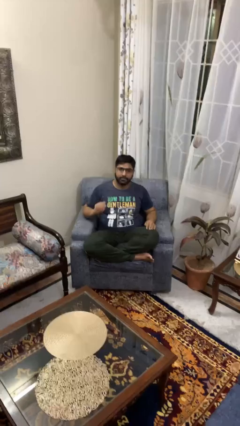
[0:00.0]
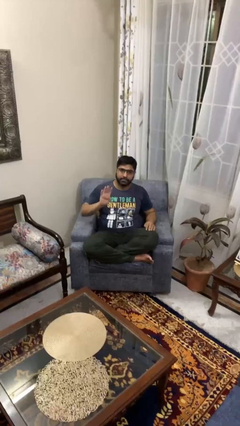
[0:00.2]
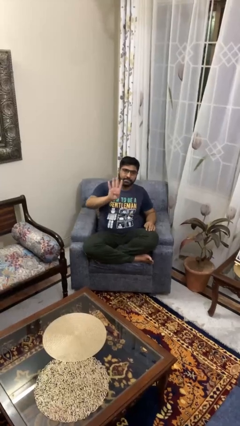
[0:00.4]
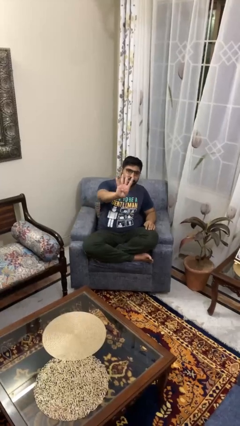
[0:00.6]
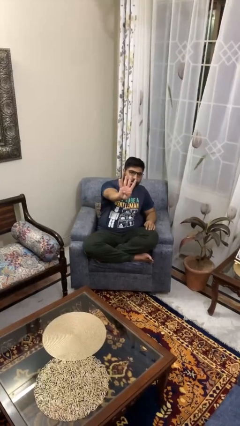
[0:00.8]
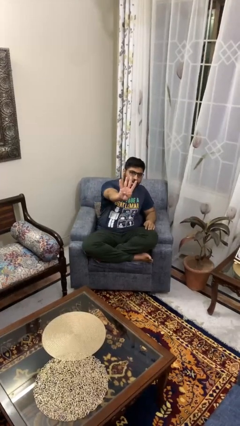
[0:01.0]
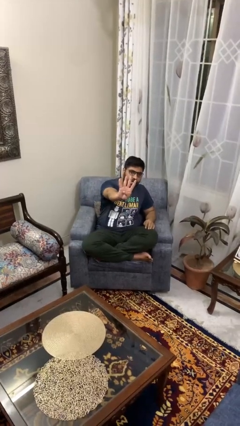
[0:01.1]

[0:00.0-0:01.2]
person gestures number four

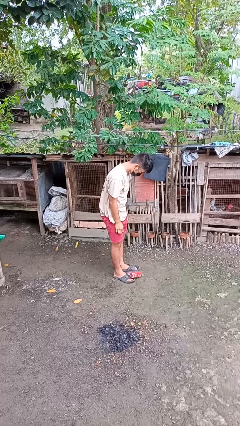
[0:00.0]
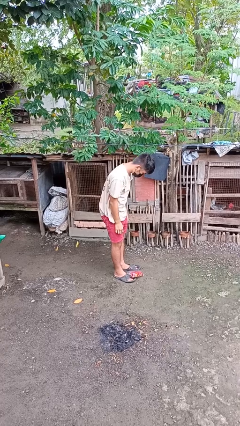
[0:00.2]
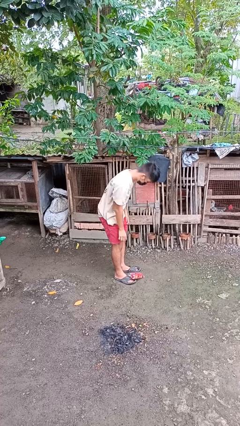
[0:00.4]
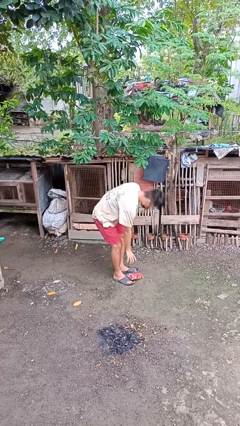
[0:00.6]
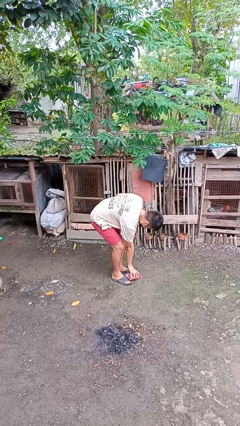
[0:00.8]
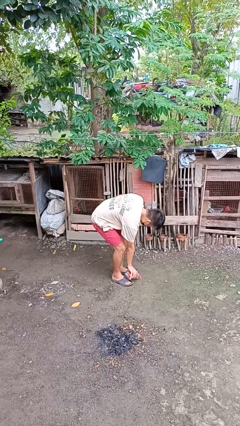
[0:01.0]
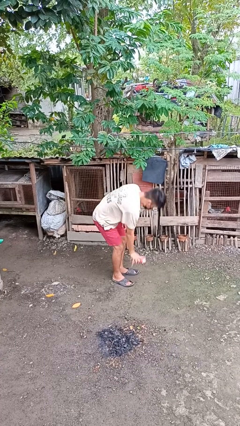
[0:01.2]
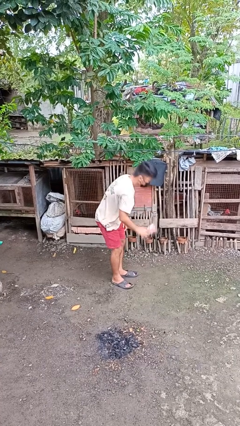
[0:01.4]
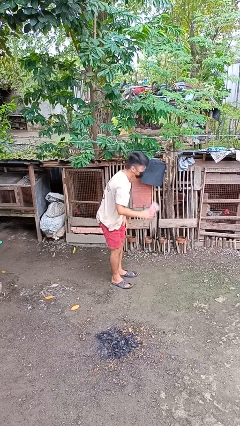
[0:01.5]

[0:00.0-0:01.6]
person picks up object from floor

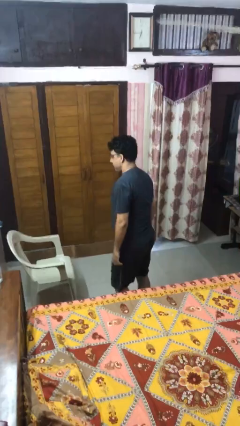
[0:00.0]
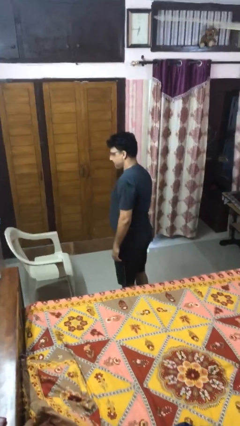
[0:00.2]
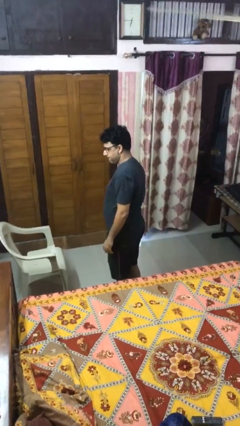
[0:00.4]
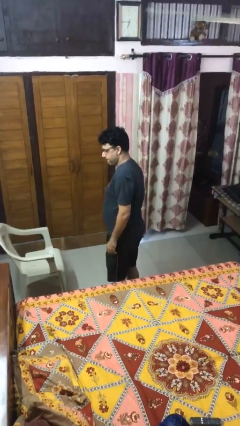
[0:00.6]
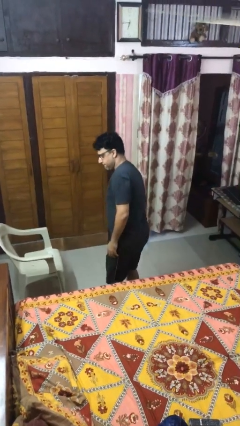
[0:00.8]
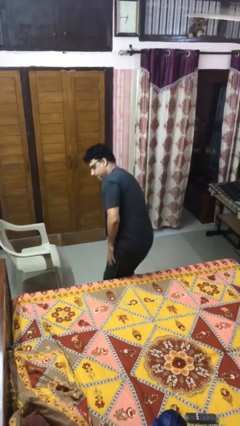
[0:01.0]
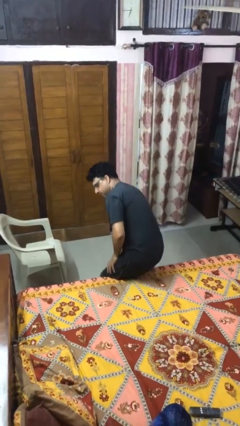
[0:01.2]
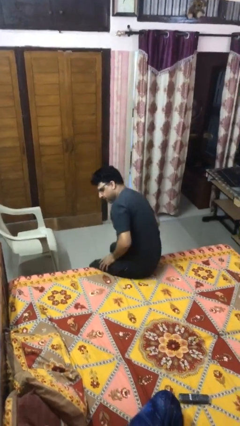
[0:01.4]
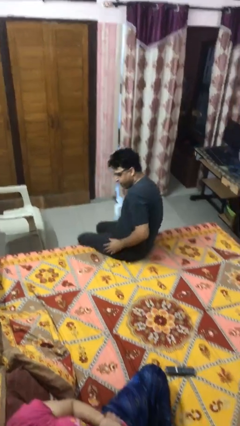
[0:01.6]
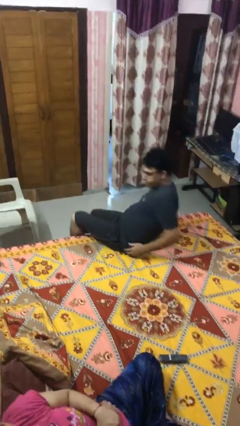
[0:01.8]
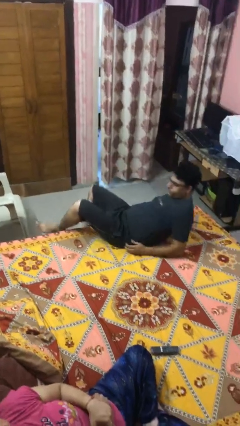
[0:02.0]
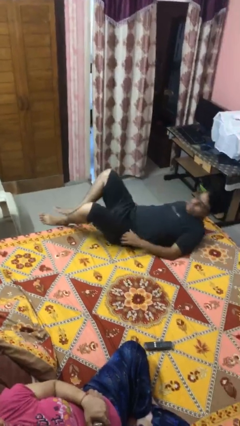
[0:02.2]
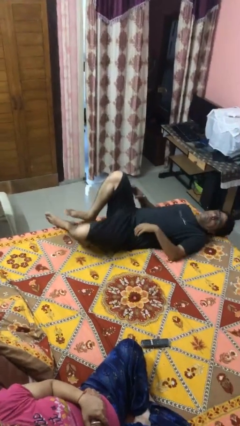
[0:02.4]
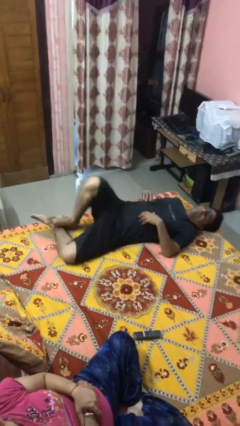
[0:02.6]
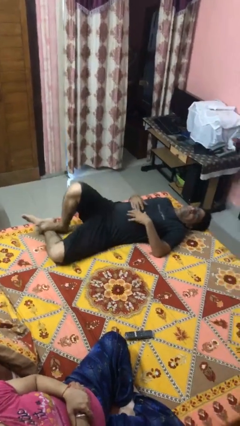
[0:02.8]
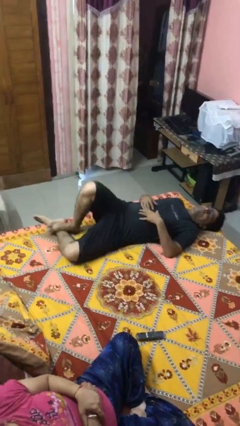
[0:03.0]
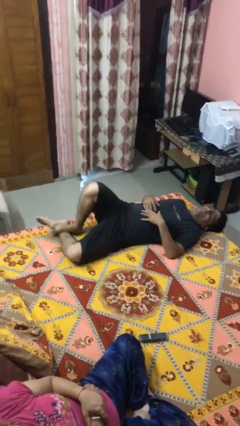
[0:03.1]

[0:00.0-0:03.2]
person lies down on bed

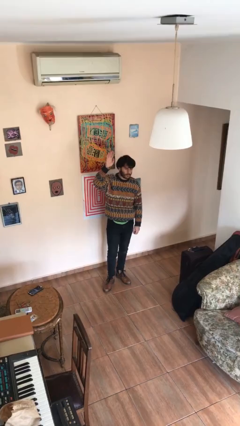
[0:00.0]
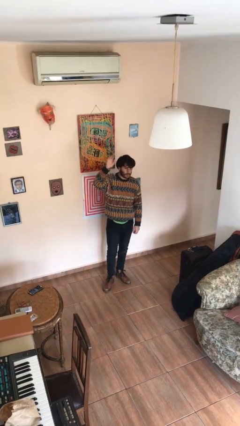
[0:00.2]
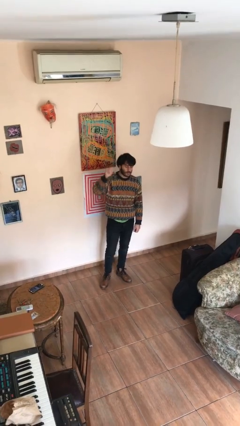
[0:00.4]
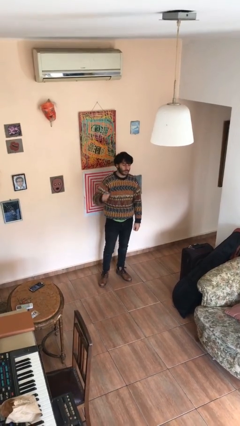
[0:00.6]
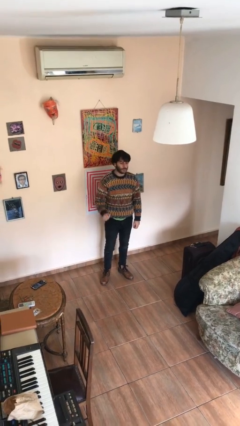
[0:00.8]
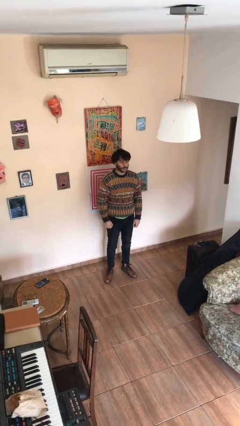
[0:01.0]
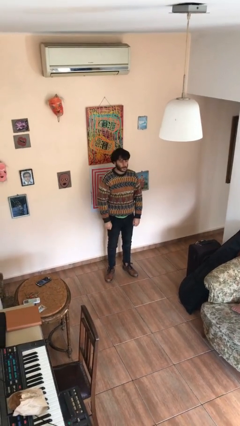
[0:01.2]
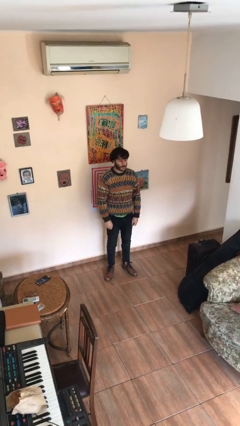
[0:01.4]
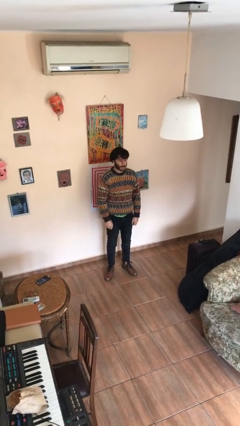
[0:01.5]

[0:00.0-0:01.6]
person gestures lower hand

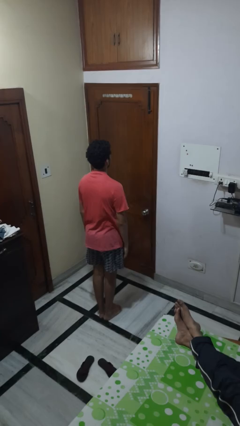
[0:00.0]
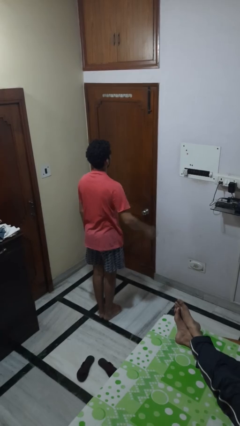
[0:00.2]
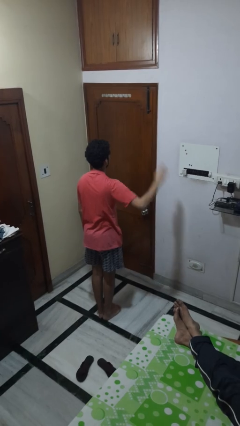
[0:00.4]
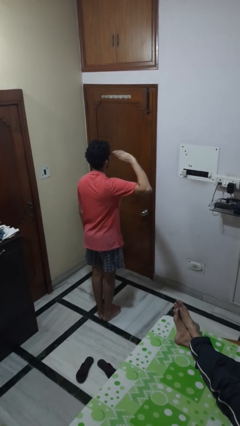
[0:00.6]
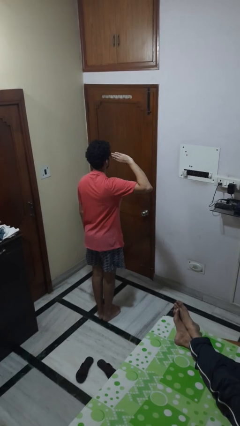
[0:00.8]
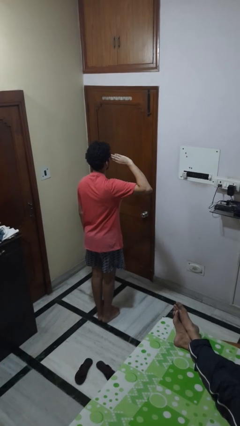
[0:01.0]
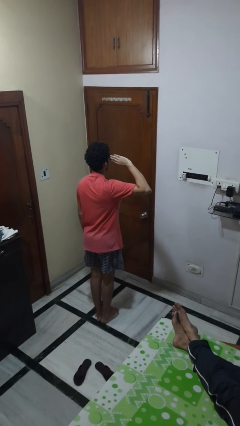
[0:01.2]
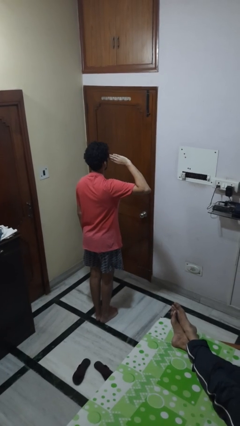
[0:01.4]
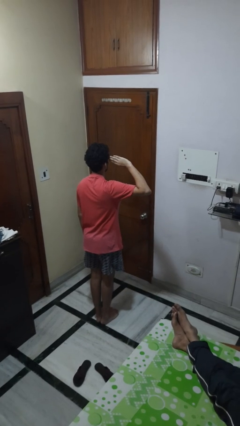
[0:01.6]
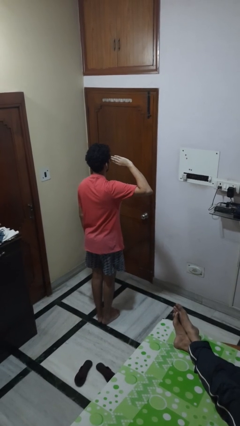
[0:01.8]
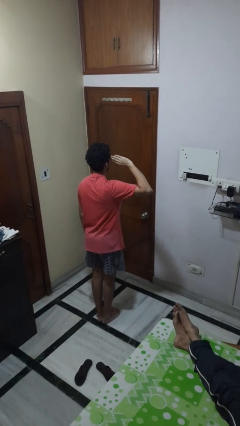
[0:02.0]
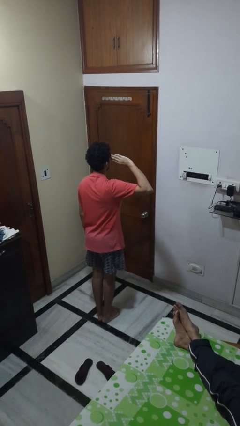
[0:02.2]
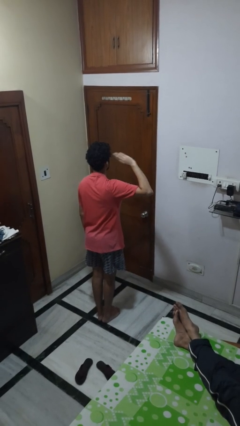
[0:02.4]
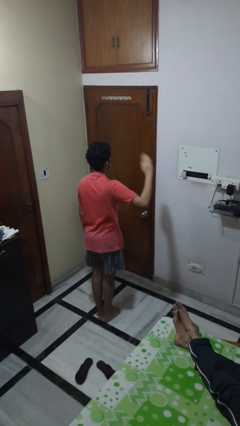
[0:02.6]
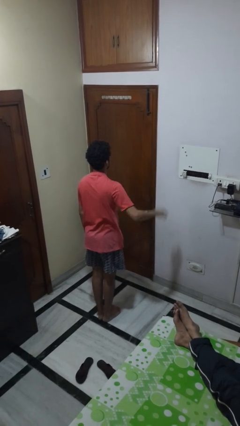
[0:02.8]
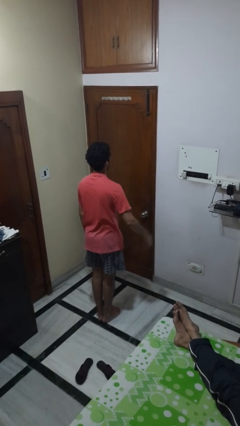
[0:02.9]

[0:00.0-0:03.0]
person salutes

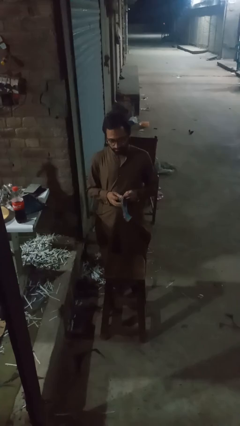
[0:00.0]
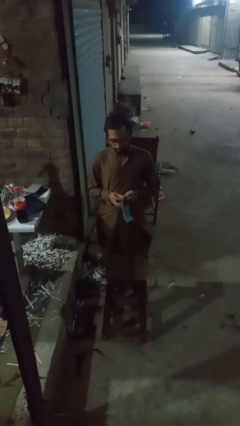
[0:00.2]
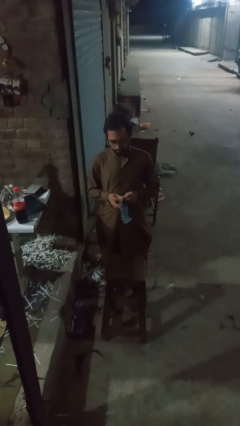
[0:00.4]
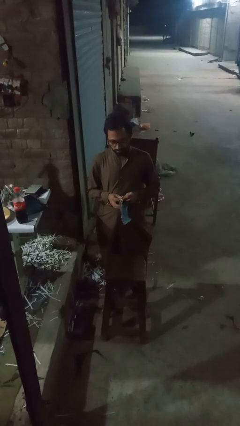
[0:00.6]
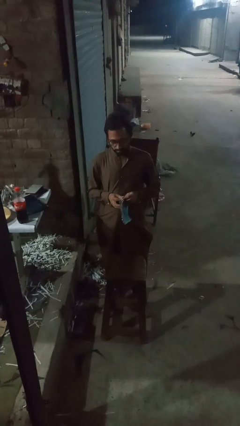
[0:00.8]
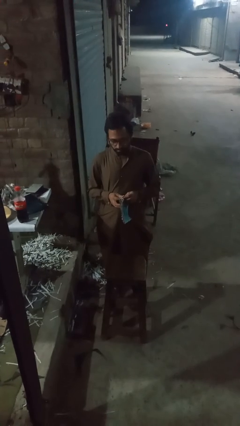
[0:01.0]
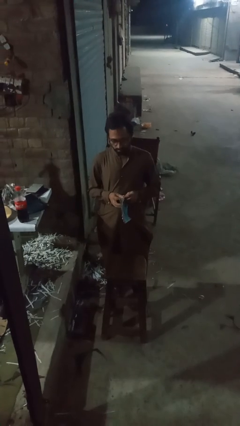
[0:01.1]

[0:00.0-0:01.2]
person reads newspaper

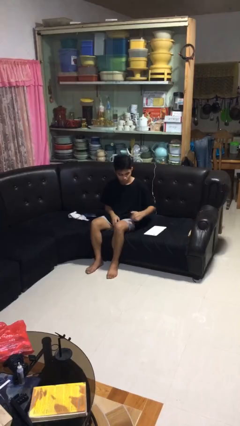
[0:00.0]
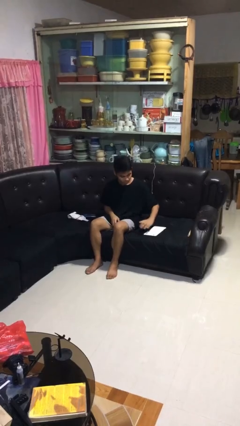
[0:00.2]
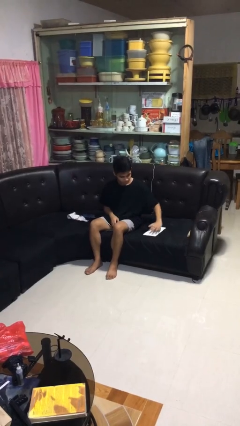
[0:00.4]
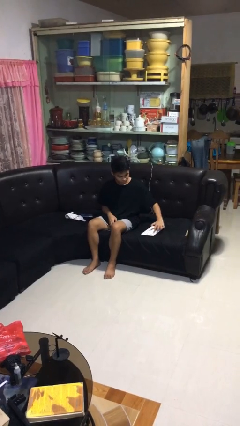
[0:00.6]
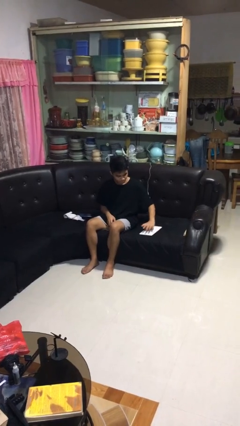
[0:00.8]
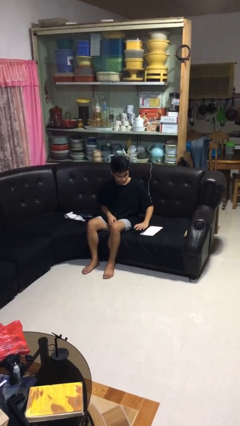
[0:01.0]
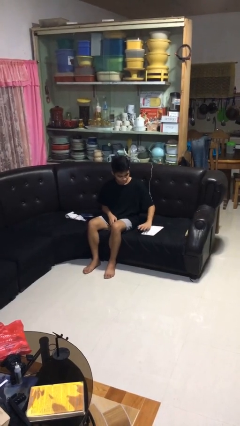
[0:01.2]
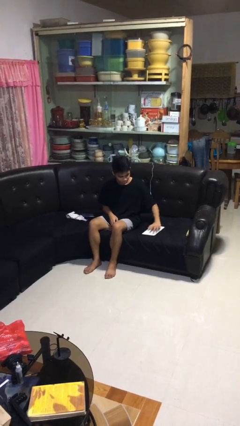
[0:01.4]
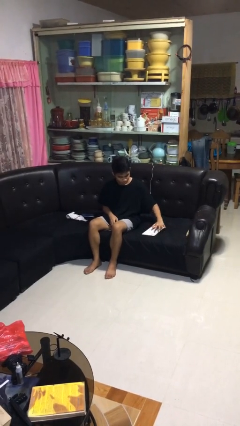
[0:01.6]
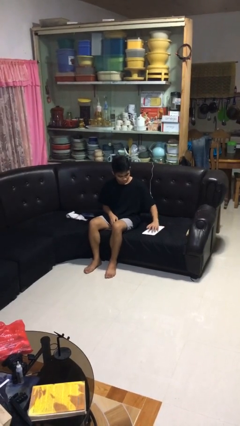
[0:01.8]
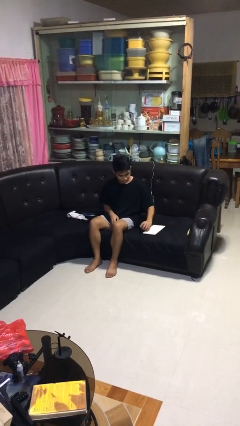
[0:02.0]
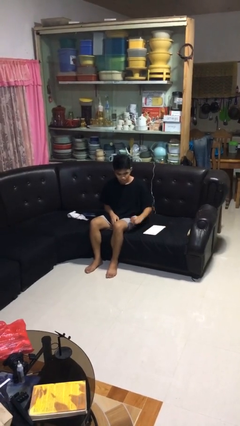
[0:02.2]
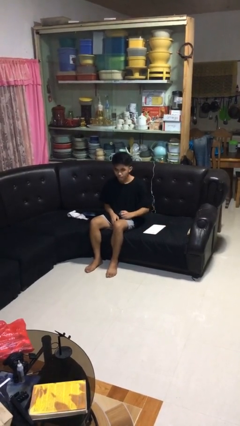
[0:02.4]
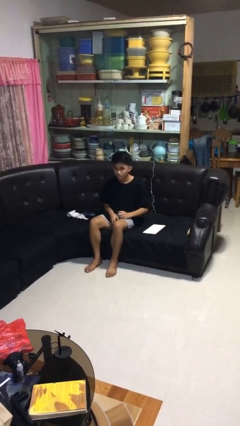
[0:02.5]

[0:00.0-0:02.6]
person waves hand over object

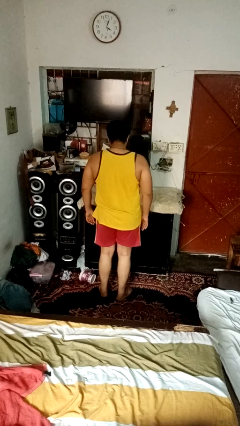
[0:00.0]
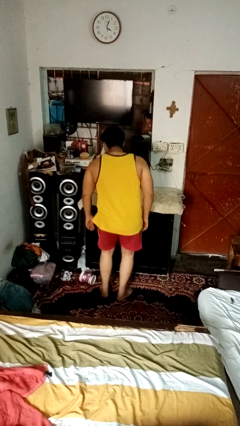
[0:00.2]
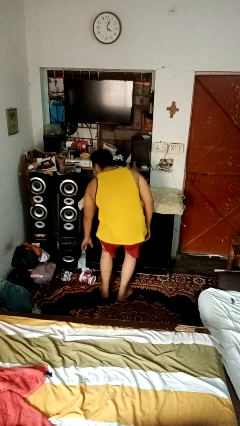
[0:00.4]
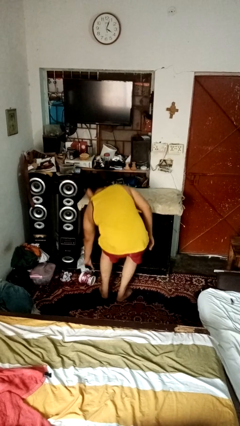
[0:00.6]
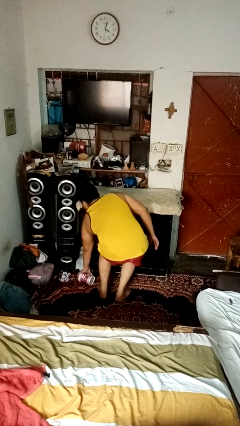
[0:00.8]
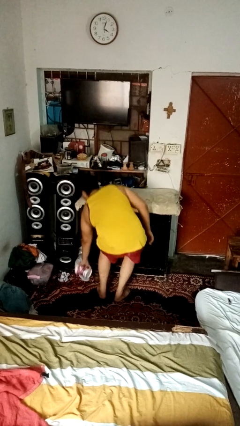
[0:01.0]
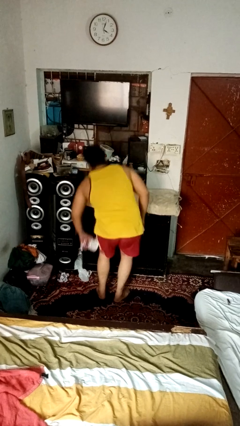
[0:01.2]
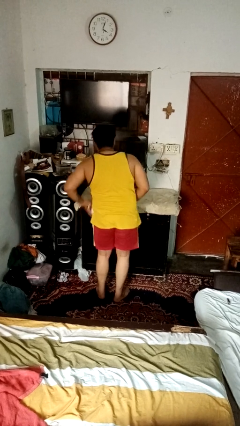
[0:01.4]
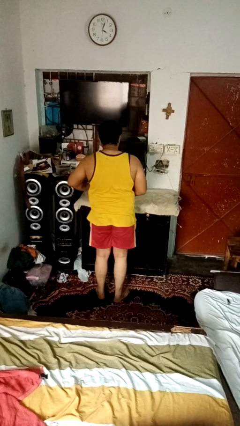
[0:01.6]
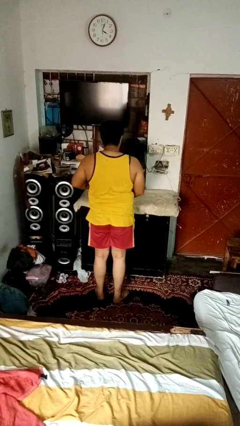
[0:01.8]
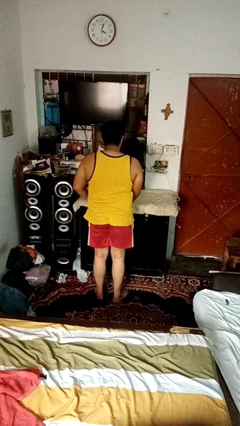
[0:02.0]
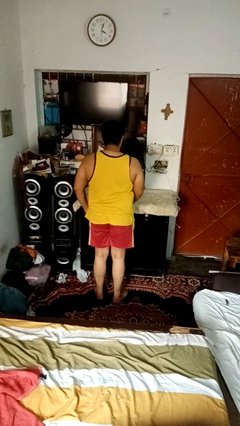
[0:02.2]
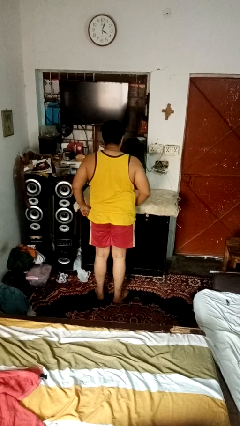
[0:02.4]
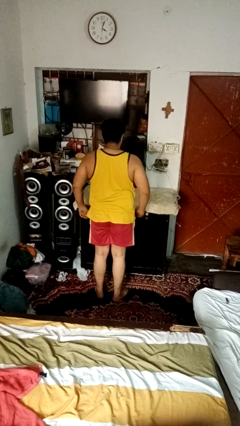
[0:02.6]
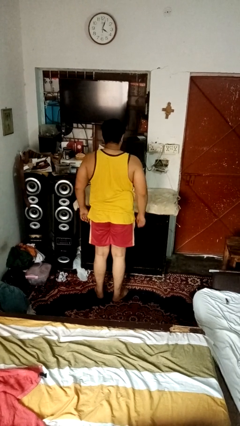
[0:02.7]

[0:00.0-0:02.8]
person sets upright furniture
